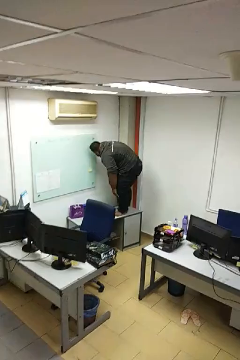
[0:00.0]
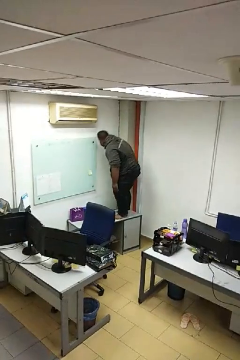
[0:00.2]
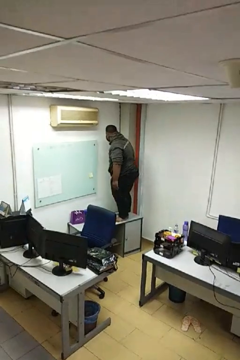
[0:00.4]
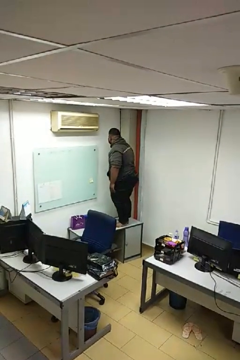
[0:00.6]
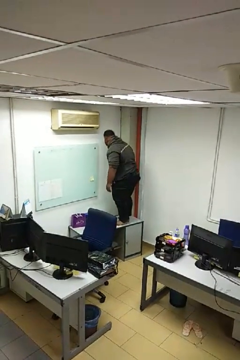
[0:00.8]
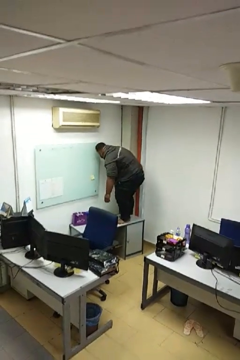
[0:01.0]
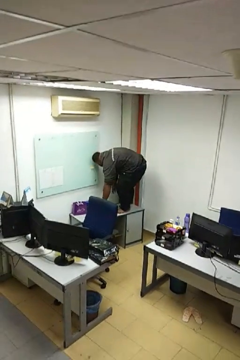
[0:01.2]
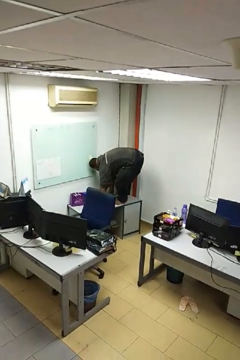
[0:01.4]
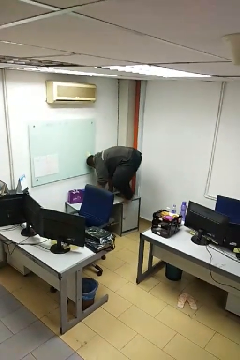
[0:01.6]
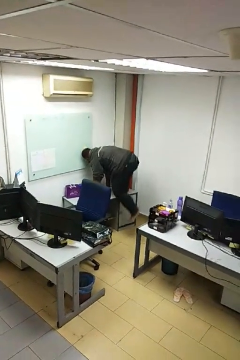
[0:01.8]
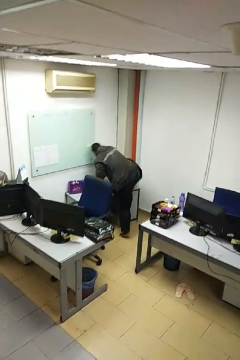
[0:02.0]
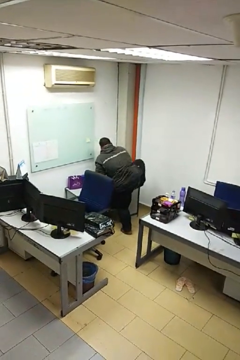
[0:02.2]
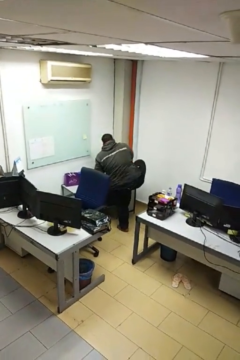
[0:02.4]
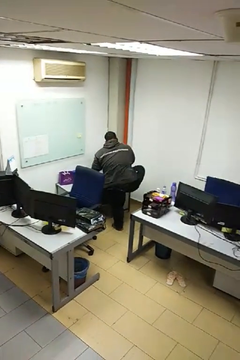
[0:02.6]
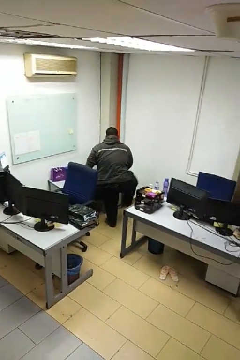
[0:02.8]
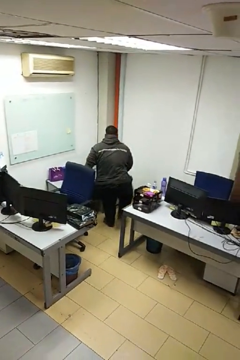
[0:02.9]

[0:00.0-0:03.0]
person climbs off table

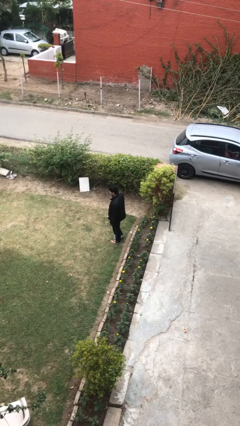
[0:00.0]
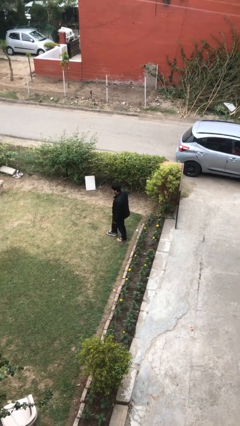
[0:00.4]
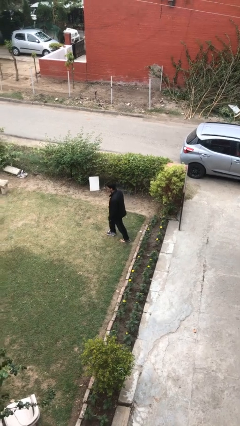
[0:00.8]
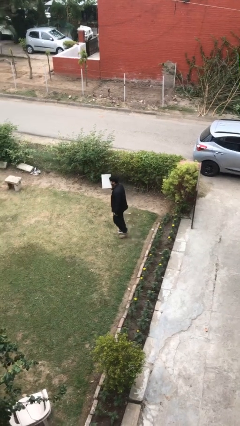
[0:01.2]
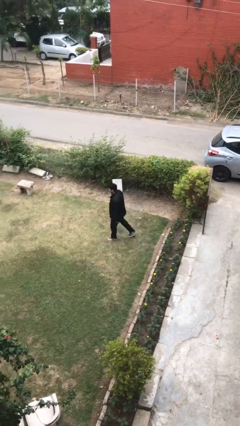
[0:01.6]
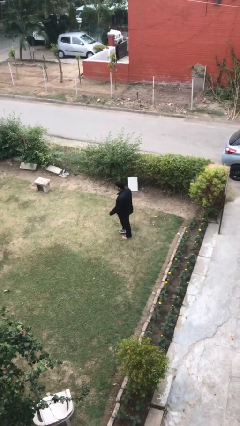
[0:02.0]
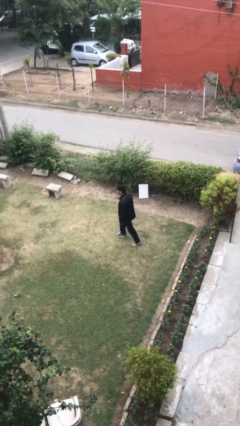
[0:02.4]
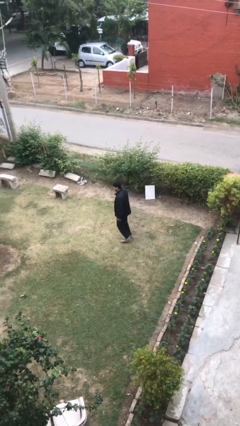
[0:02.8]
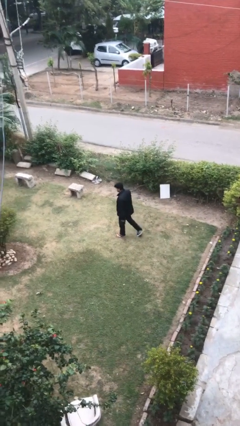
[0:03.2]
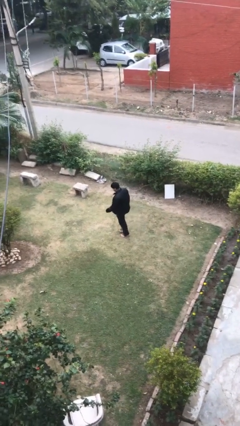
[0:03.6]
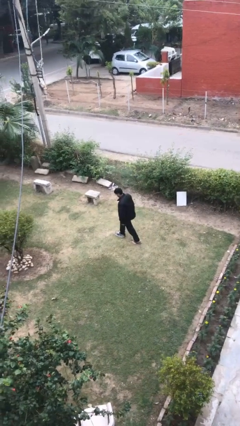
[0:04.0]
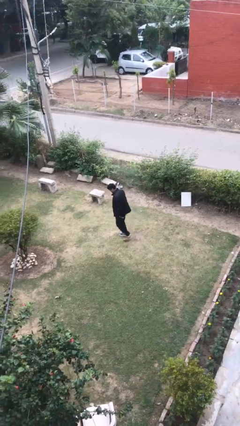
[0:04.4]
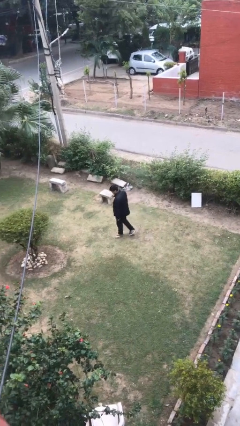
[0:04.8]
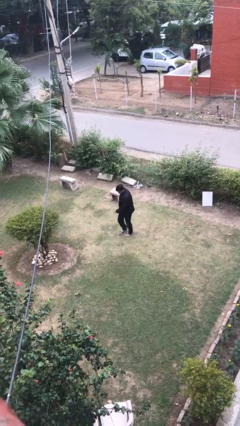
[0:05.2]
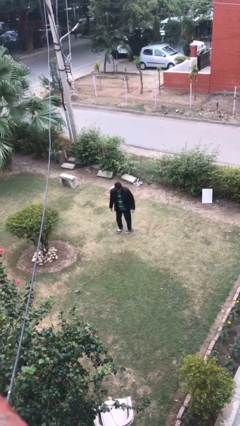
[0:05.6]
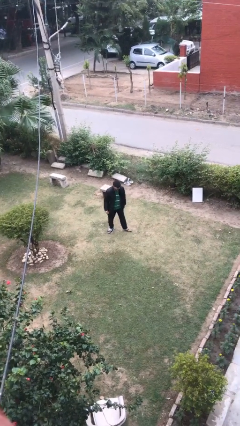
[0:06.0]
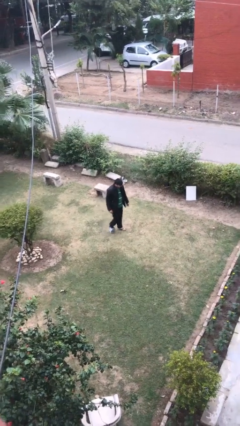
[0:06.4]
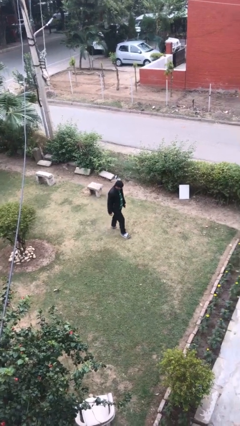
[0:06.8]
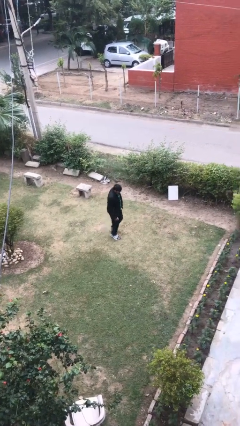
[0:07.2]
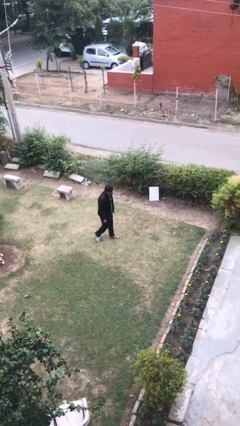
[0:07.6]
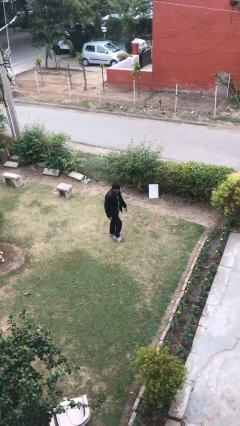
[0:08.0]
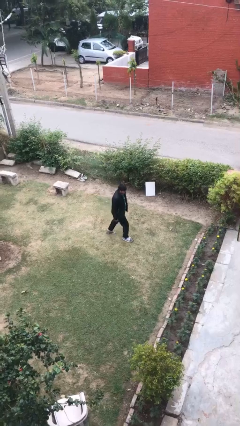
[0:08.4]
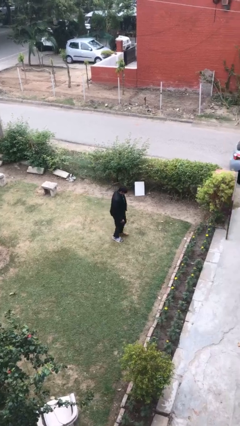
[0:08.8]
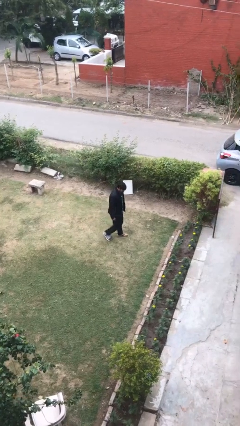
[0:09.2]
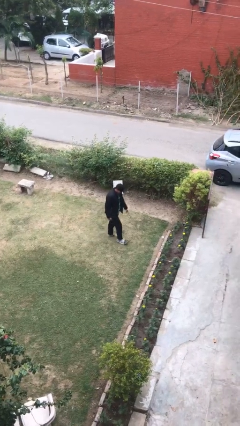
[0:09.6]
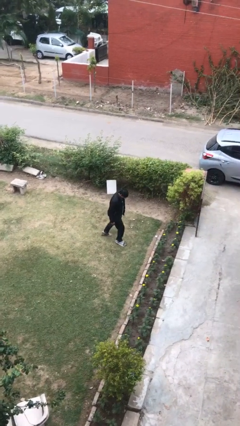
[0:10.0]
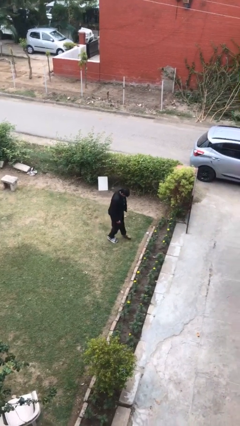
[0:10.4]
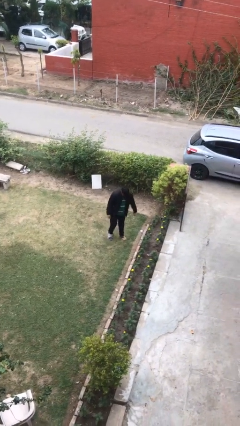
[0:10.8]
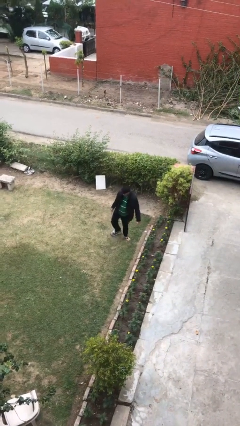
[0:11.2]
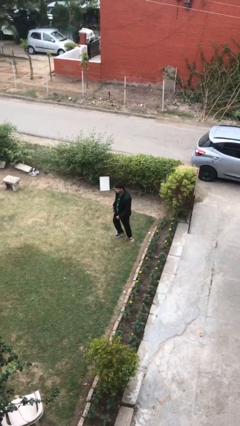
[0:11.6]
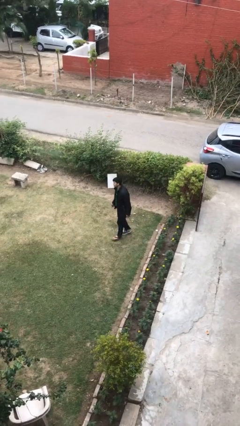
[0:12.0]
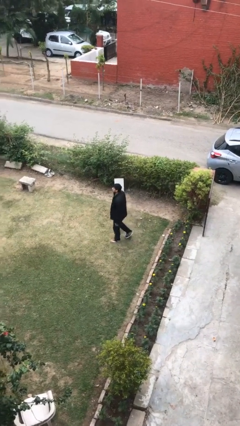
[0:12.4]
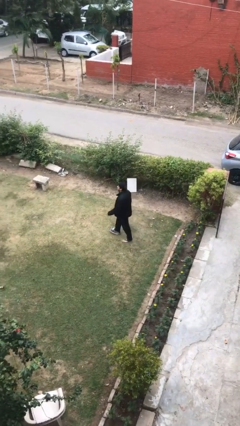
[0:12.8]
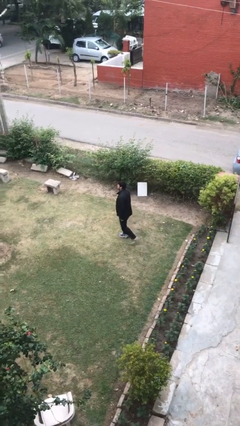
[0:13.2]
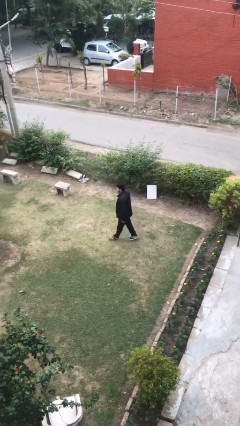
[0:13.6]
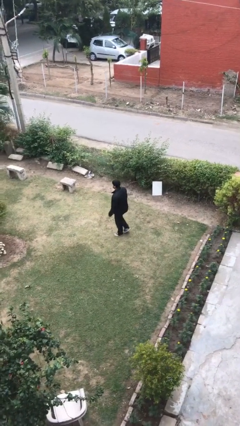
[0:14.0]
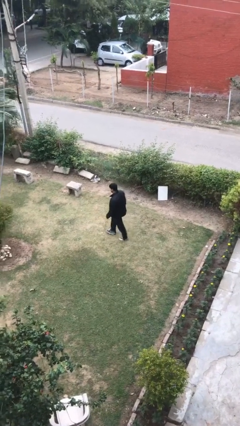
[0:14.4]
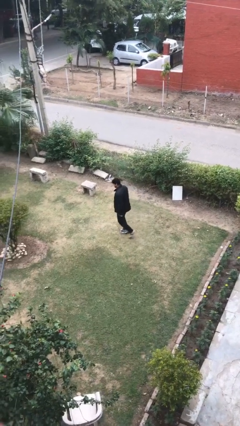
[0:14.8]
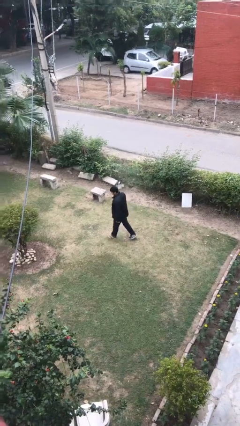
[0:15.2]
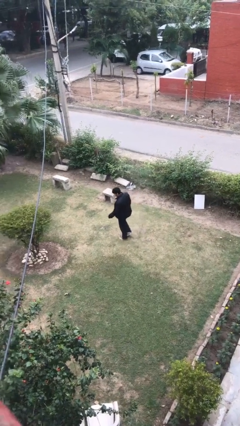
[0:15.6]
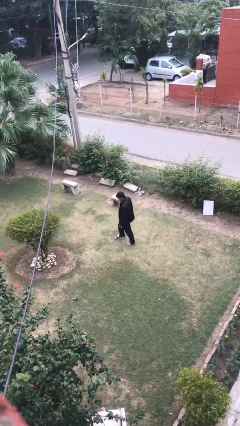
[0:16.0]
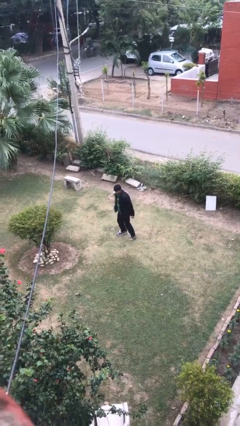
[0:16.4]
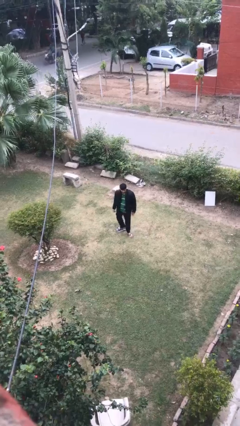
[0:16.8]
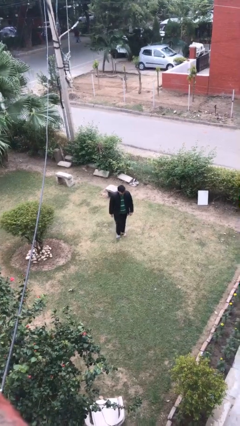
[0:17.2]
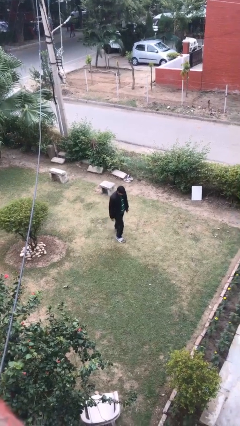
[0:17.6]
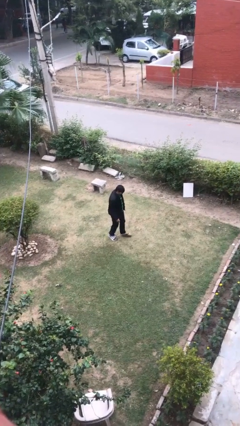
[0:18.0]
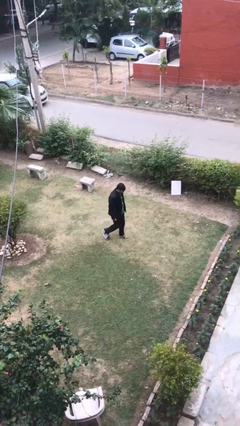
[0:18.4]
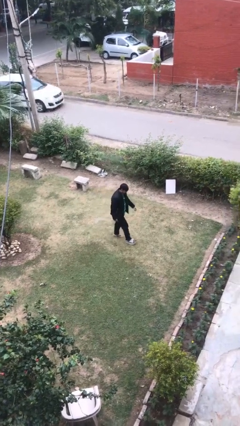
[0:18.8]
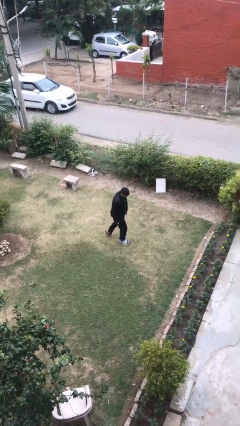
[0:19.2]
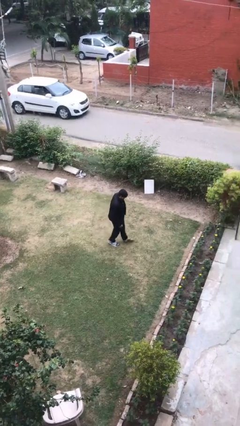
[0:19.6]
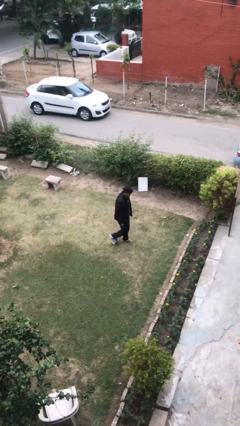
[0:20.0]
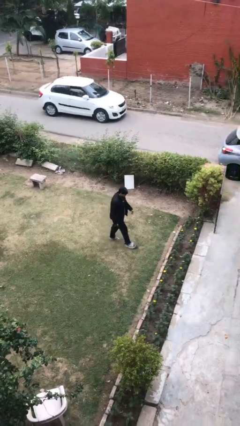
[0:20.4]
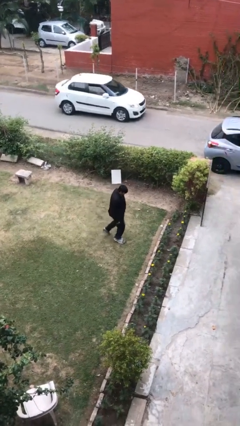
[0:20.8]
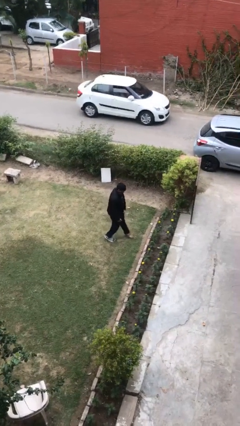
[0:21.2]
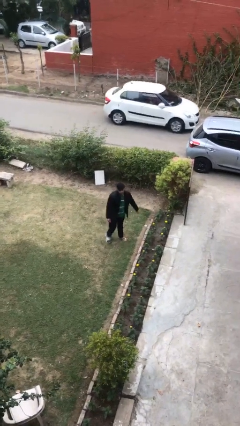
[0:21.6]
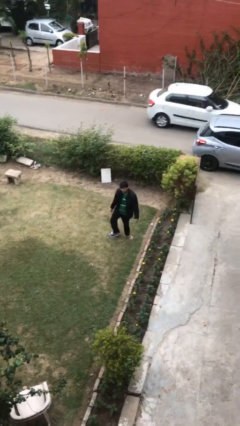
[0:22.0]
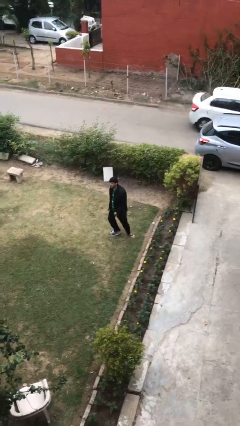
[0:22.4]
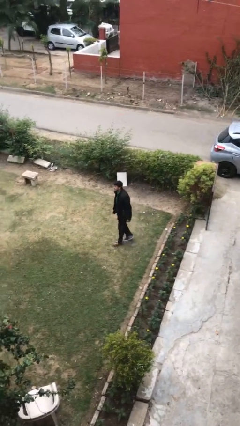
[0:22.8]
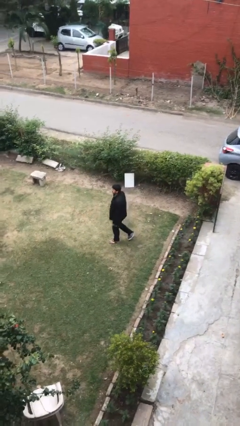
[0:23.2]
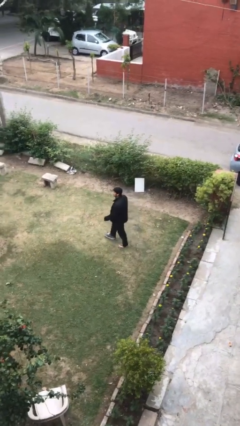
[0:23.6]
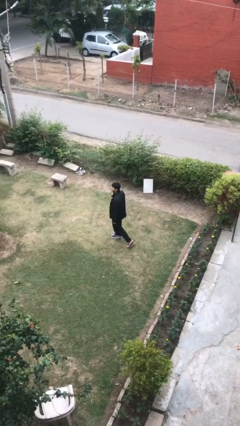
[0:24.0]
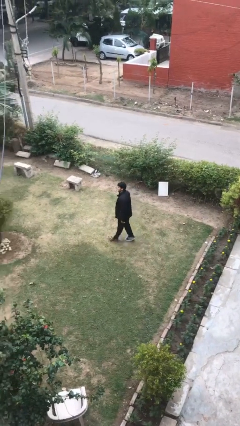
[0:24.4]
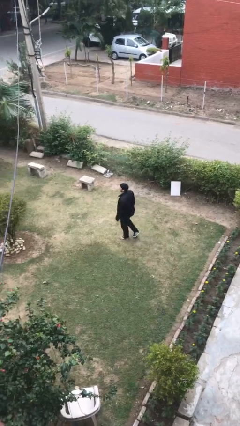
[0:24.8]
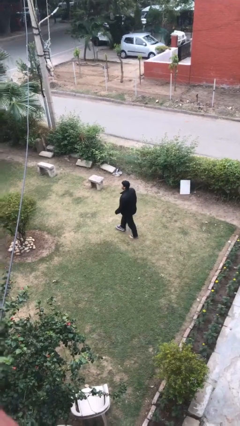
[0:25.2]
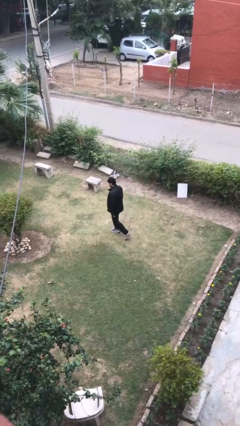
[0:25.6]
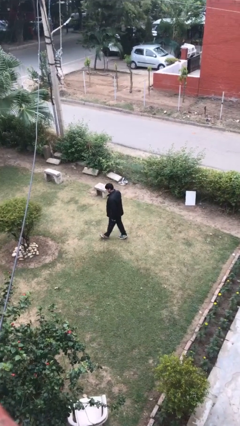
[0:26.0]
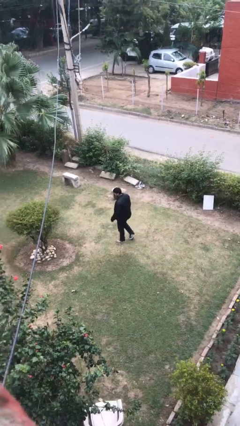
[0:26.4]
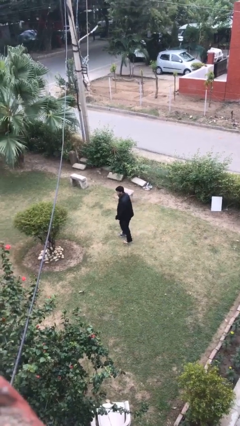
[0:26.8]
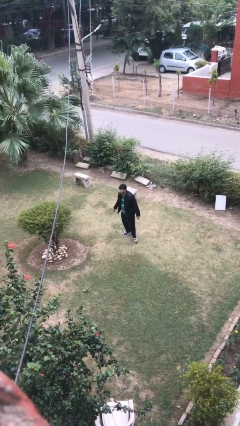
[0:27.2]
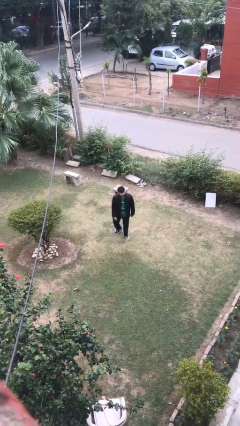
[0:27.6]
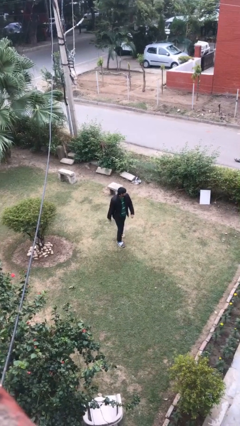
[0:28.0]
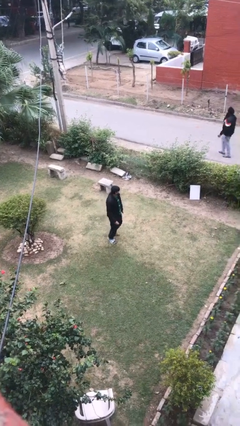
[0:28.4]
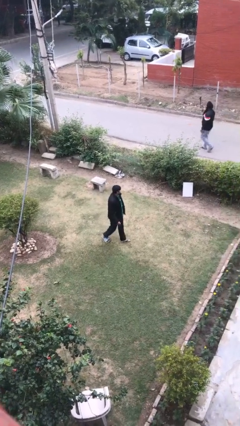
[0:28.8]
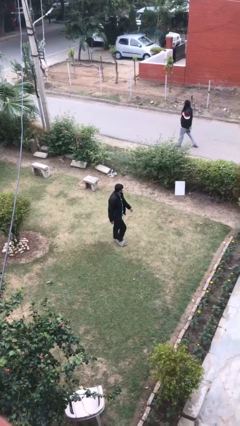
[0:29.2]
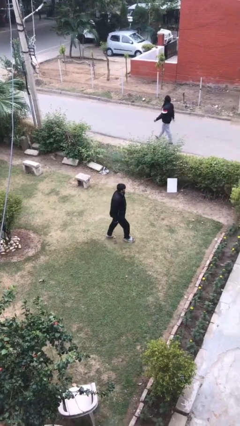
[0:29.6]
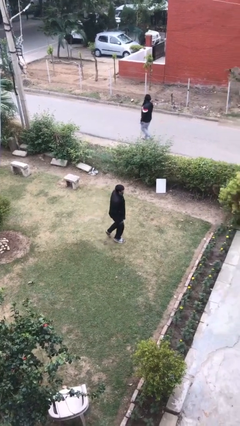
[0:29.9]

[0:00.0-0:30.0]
person walks

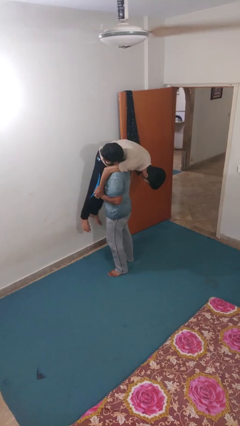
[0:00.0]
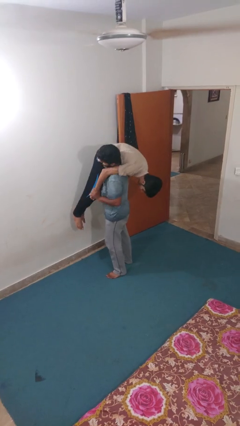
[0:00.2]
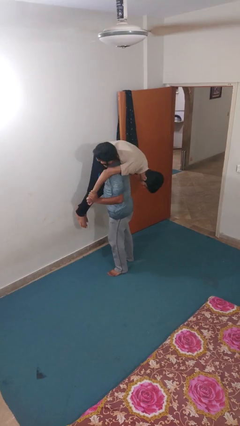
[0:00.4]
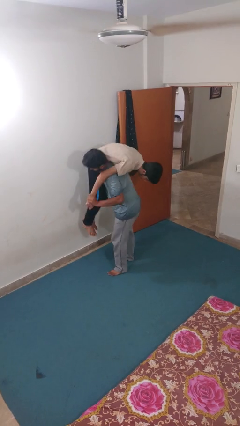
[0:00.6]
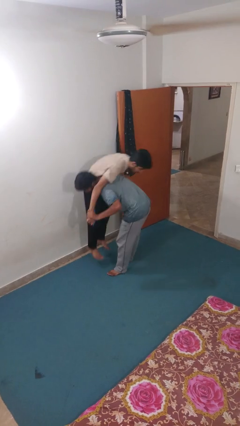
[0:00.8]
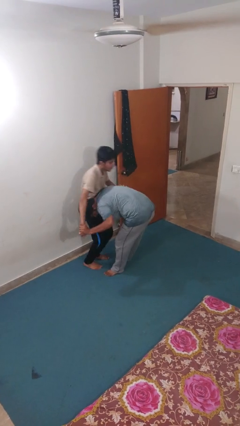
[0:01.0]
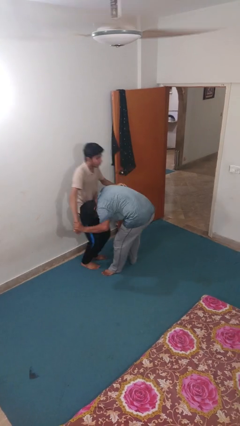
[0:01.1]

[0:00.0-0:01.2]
person puts down person
